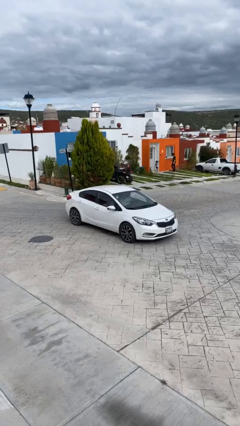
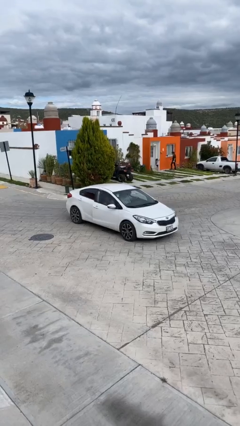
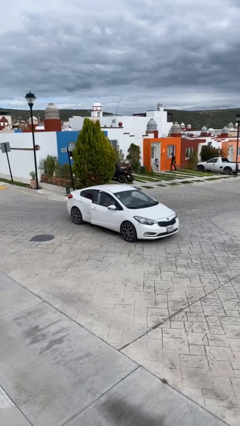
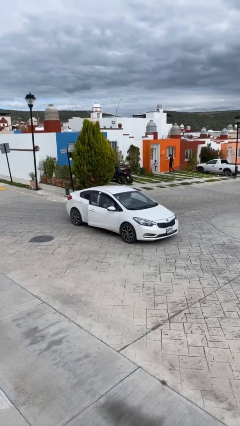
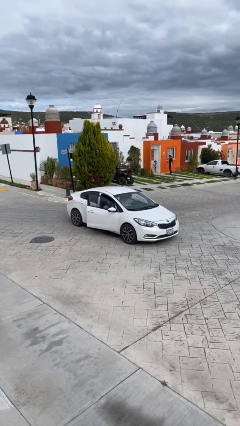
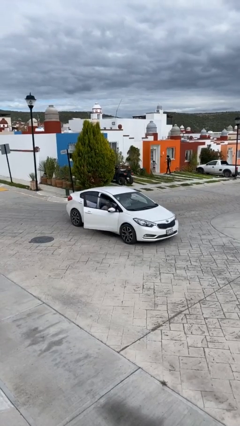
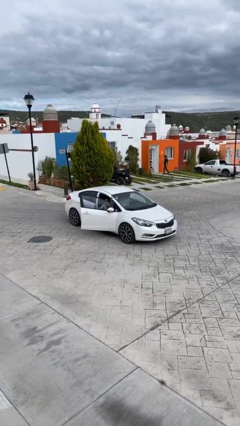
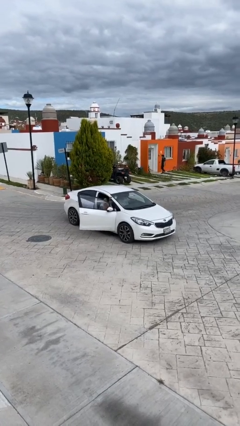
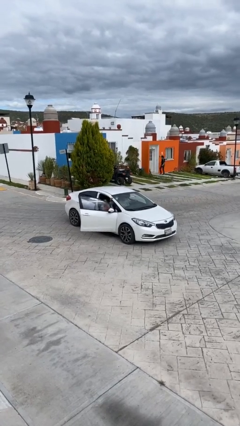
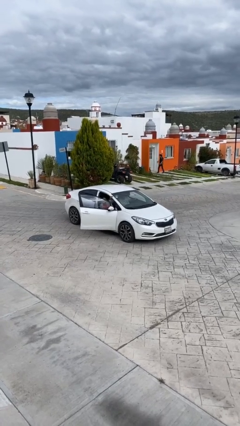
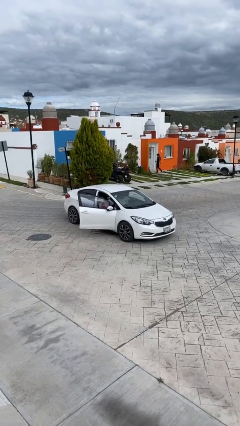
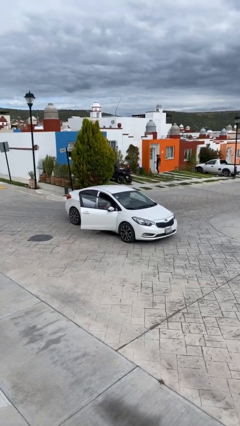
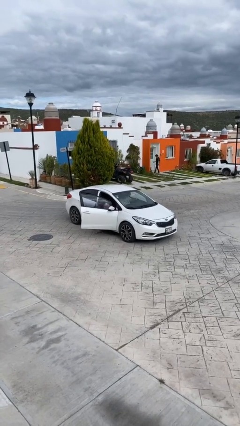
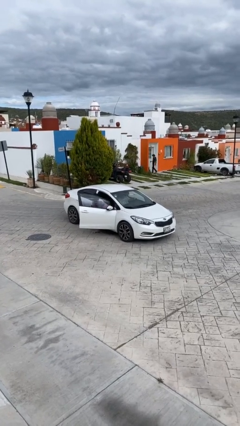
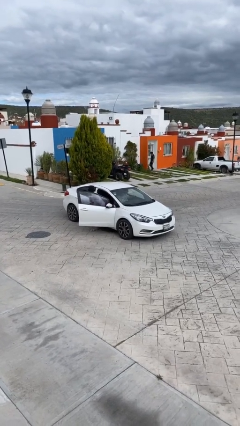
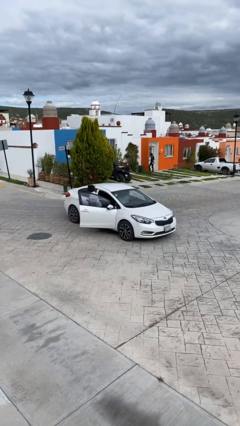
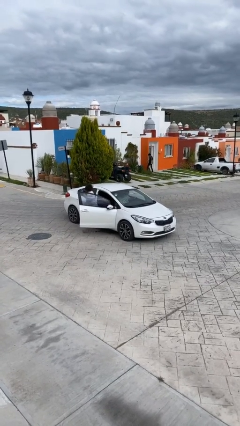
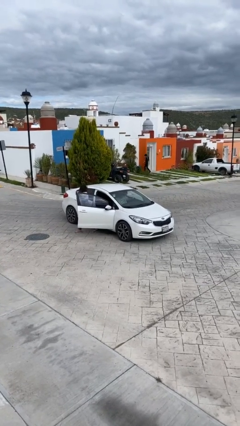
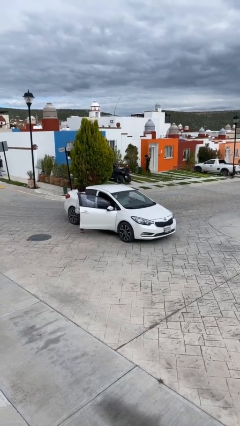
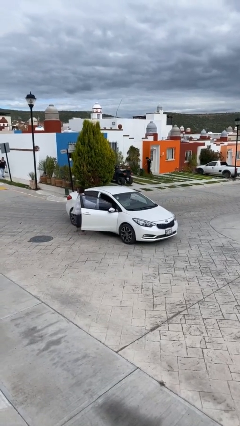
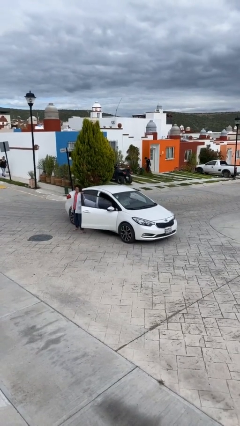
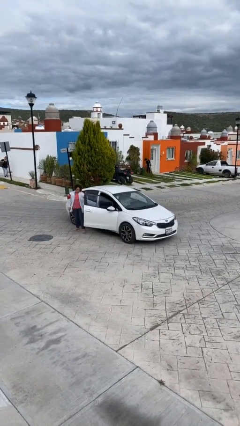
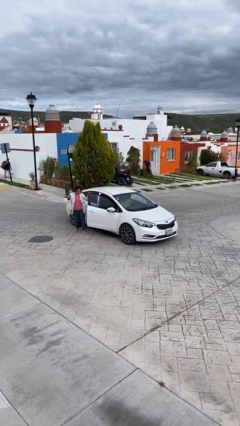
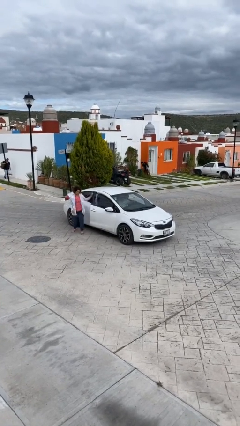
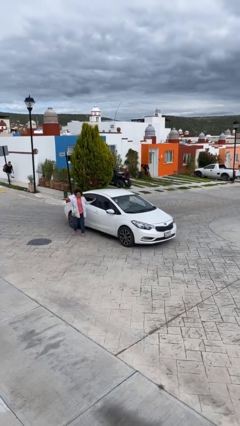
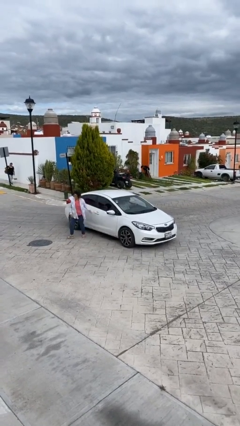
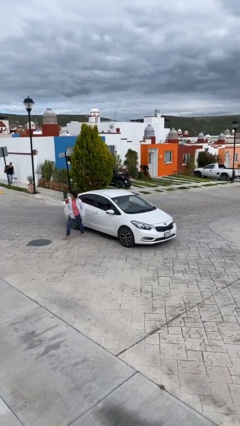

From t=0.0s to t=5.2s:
car drops off person

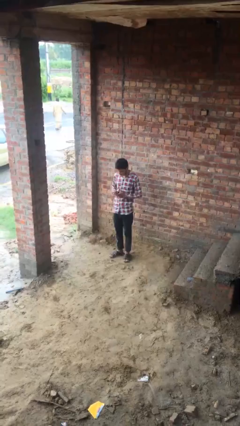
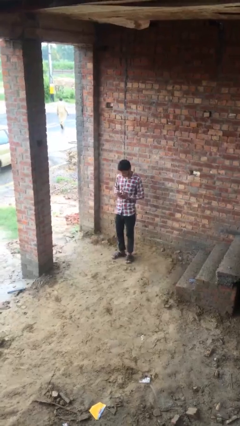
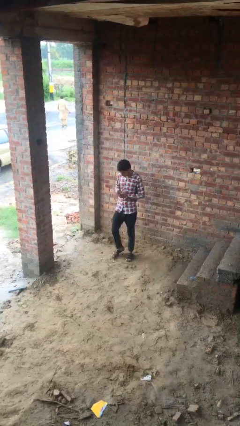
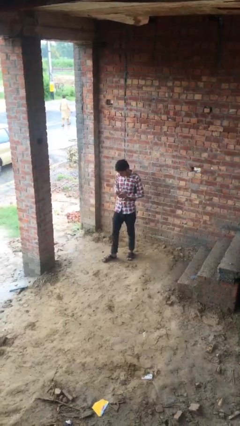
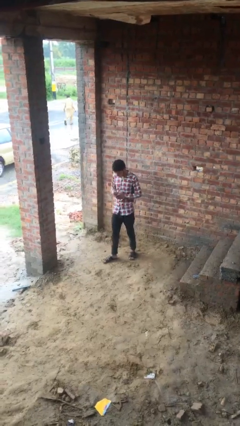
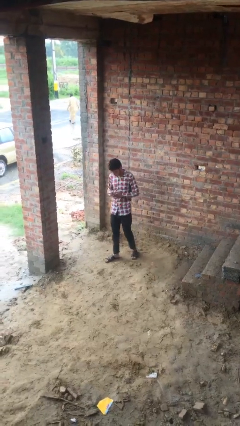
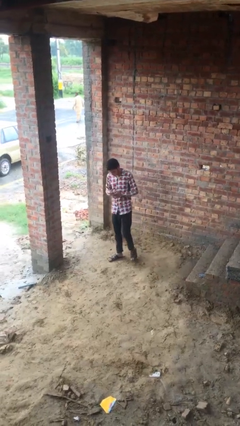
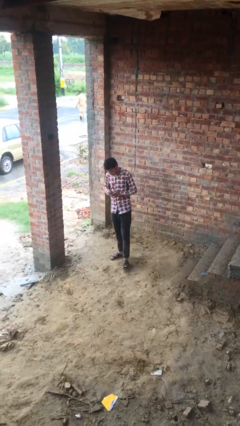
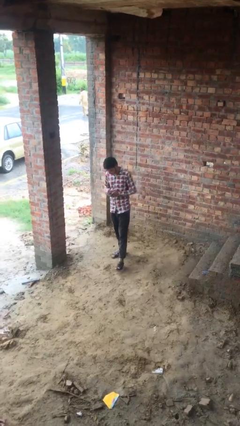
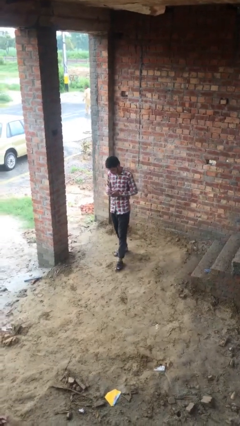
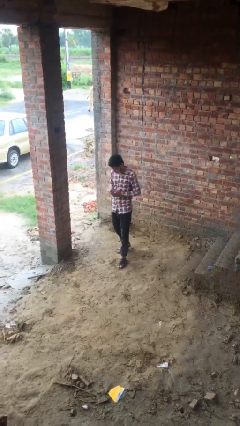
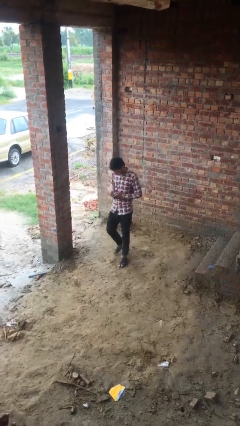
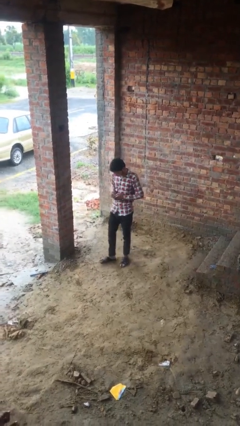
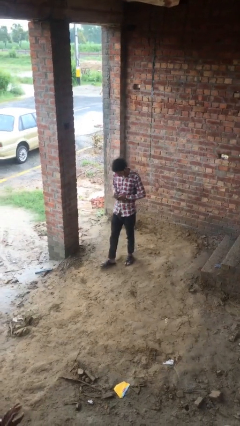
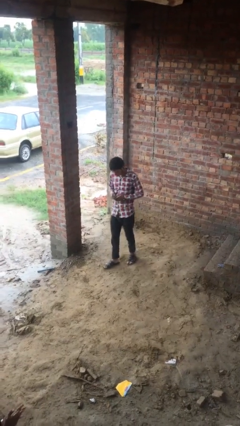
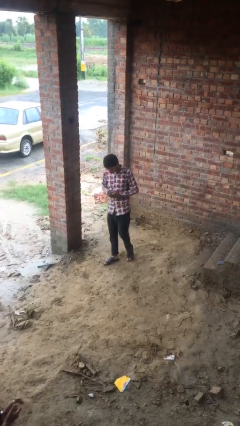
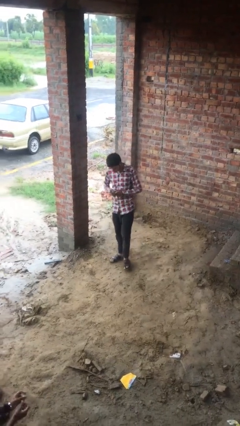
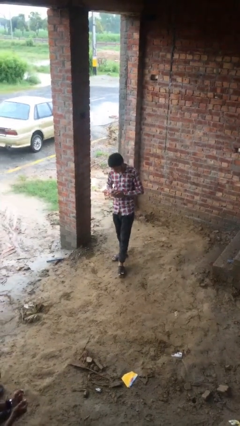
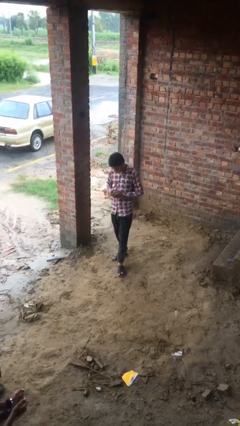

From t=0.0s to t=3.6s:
person texts on phone

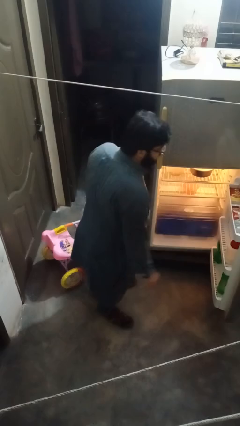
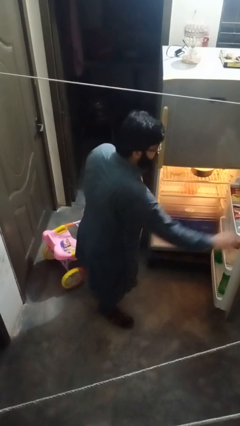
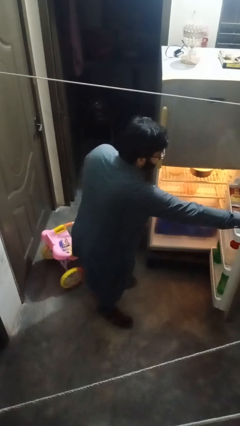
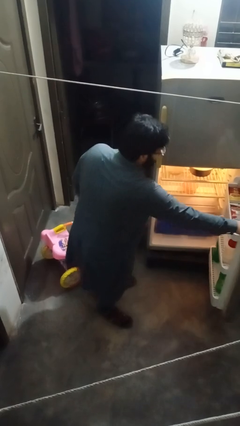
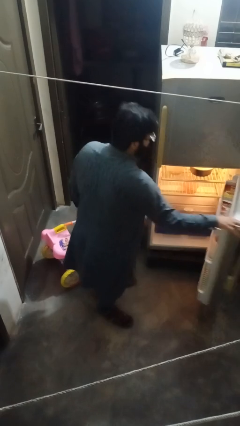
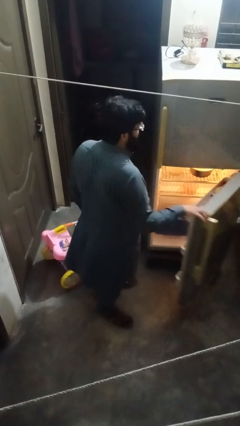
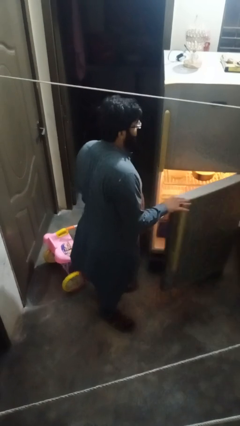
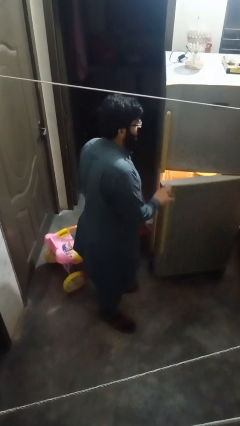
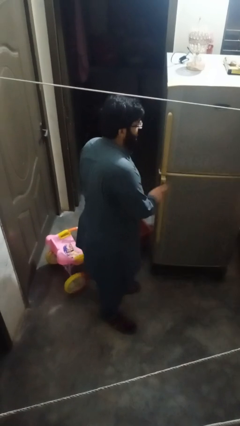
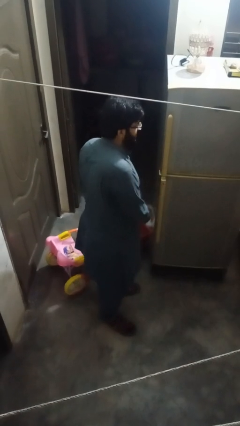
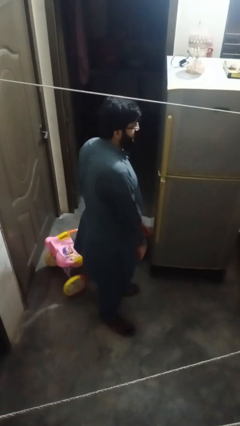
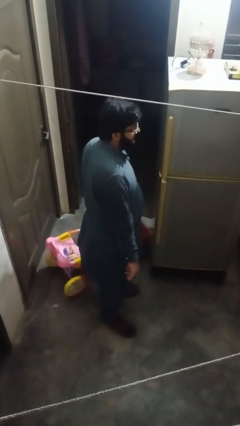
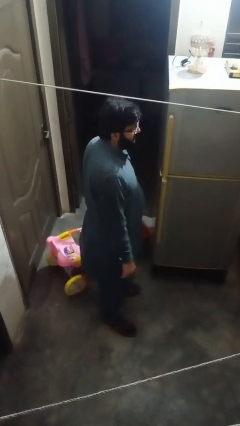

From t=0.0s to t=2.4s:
person closes refrigerator

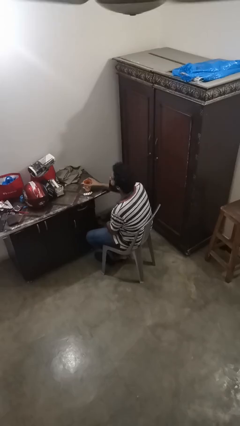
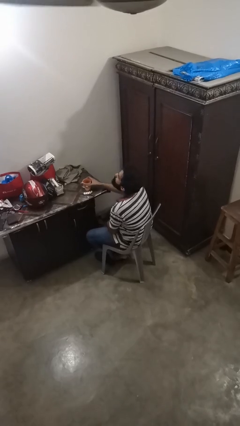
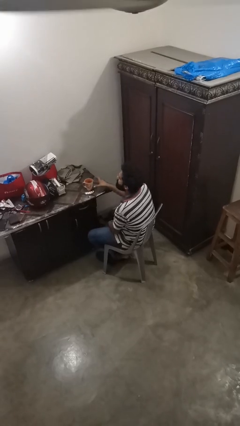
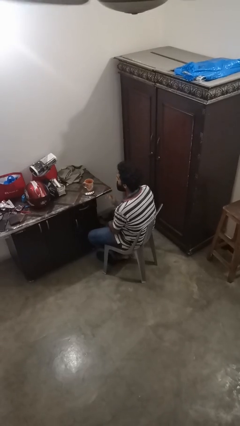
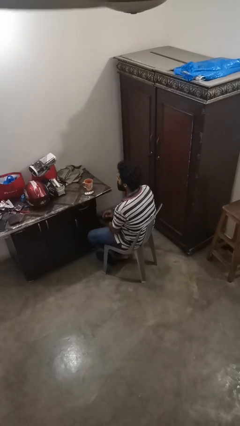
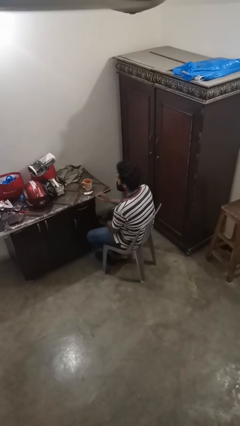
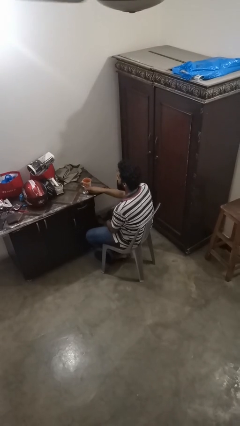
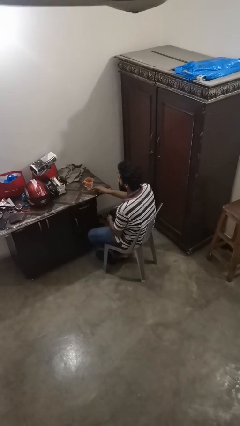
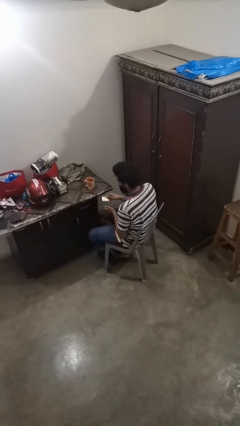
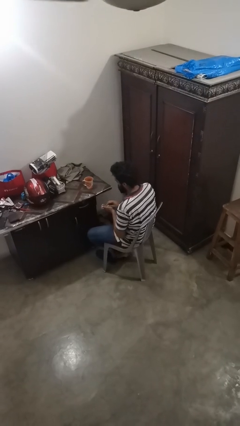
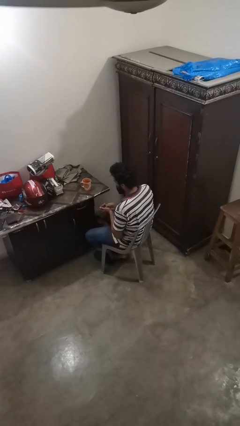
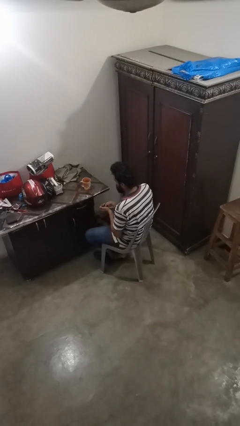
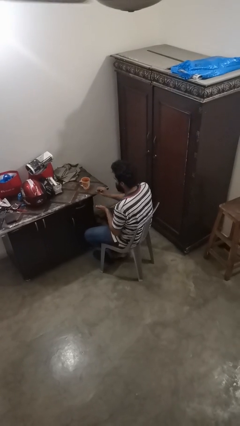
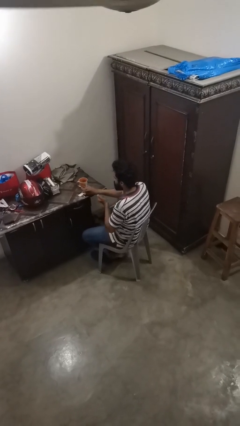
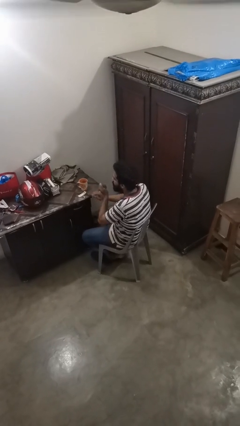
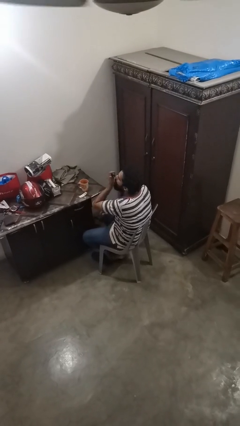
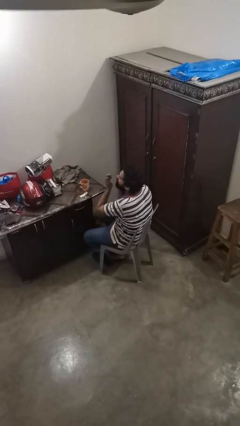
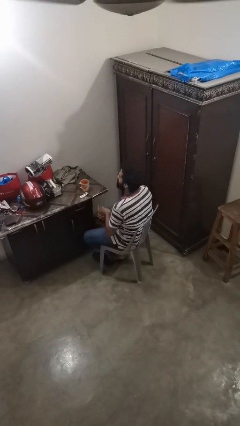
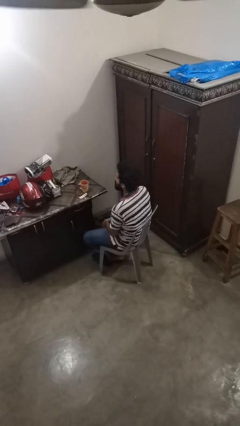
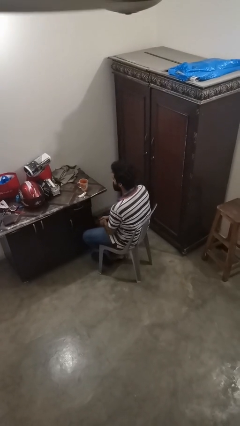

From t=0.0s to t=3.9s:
person takes medicine pills

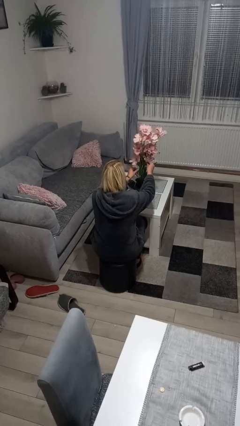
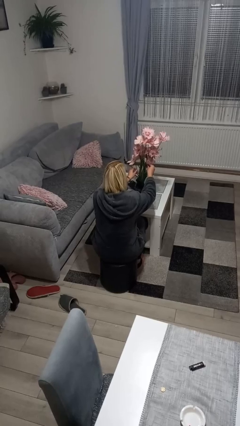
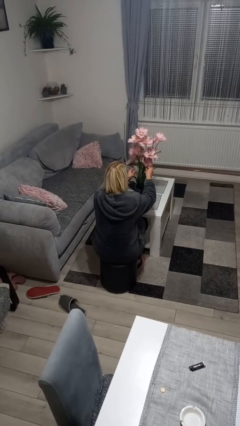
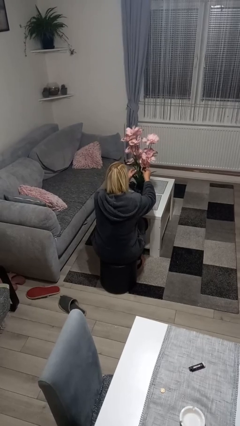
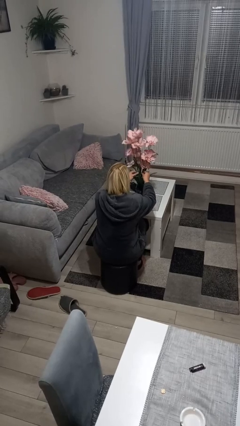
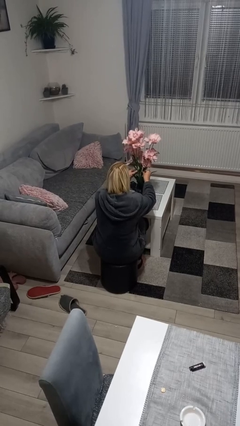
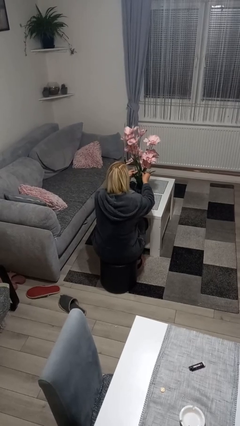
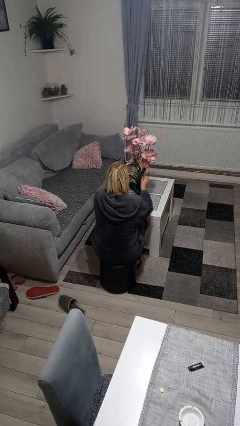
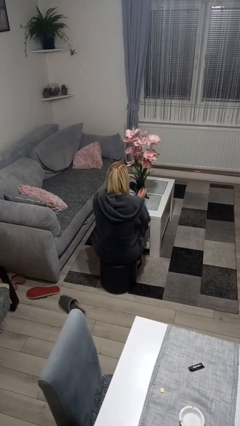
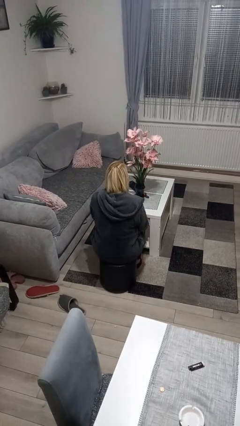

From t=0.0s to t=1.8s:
person arranges flowers in vase

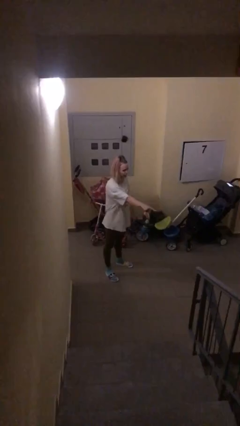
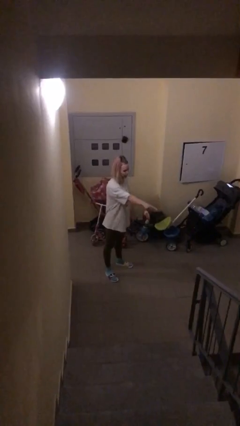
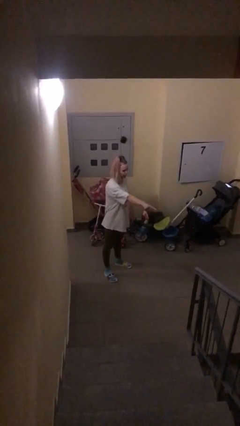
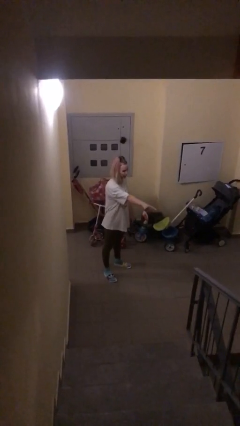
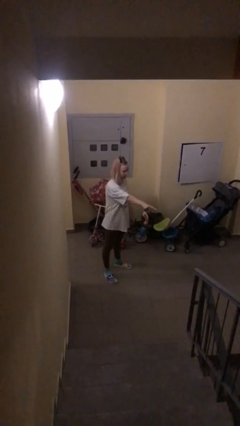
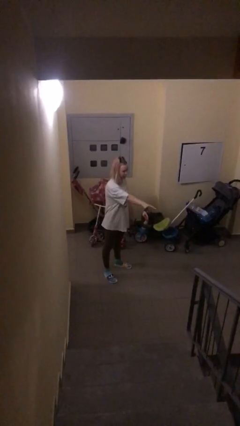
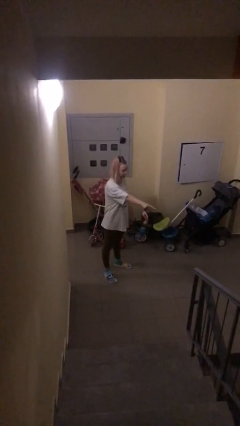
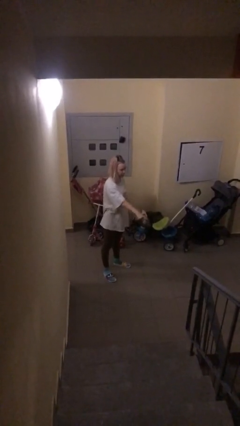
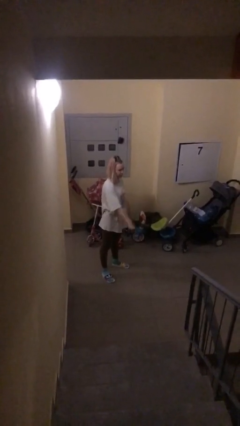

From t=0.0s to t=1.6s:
person points at person
